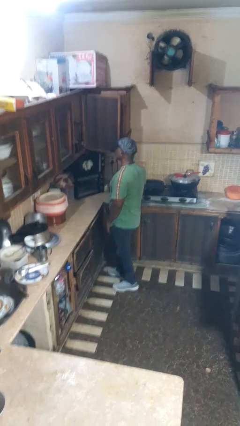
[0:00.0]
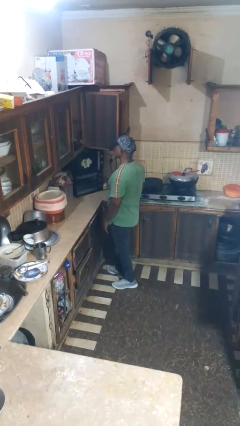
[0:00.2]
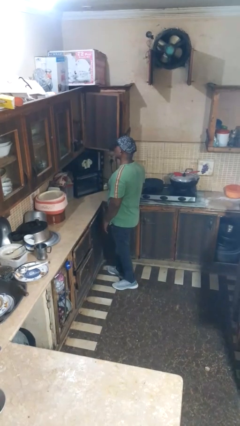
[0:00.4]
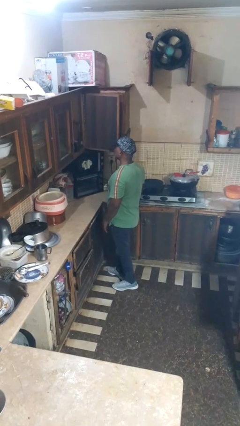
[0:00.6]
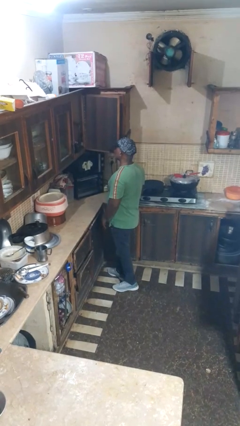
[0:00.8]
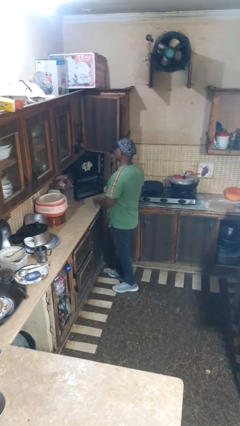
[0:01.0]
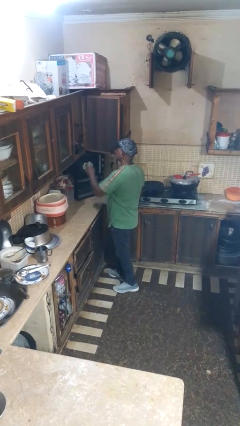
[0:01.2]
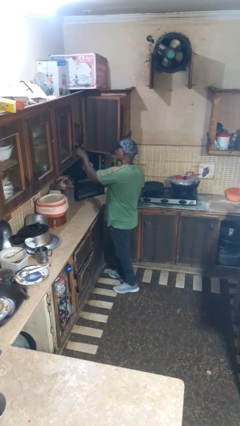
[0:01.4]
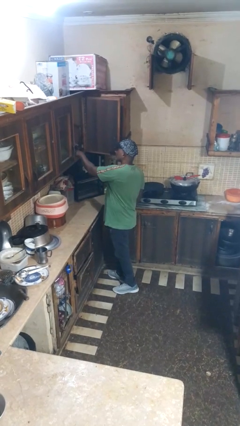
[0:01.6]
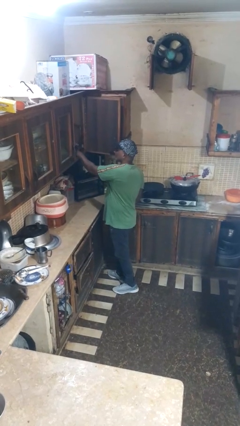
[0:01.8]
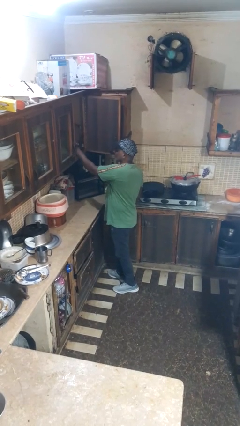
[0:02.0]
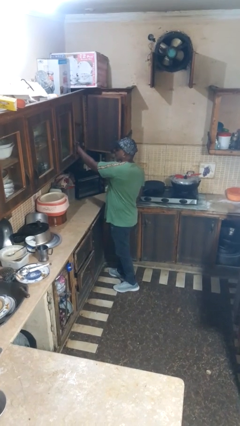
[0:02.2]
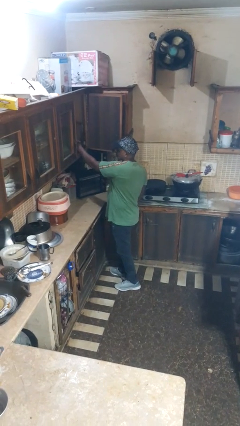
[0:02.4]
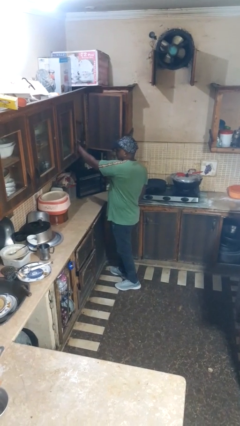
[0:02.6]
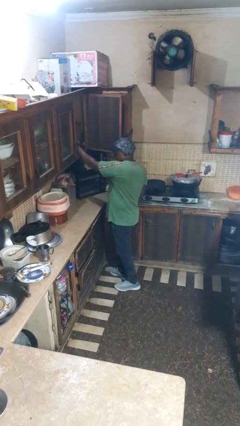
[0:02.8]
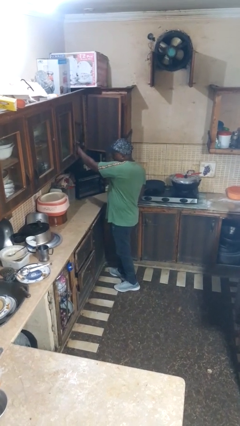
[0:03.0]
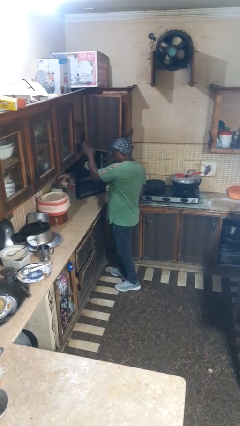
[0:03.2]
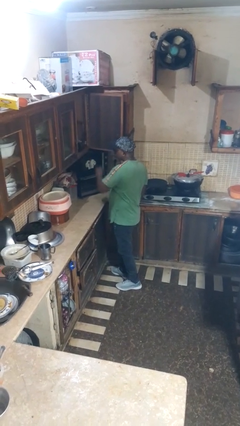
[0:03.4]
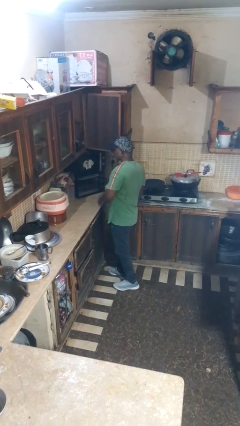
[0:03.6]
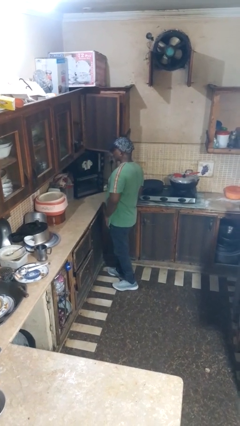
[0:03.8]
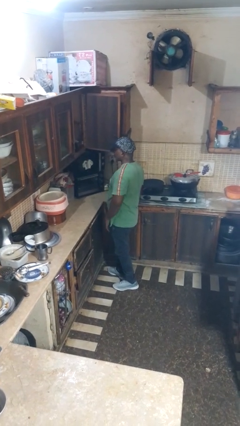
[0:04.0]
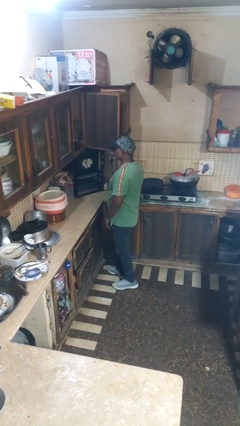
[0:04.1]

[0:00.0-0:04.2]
person searches in cabinet

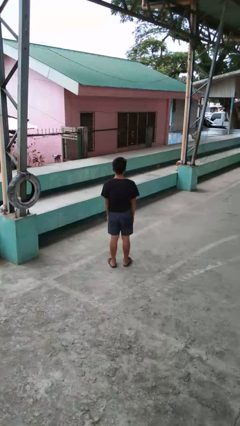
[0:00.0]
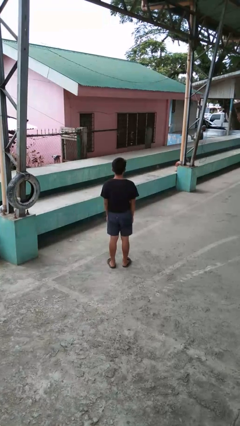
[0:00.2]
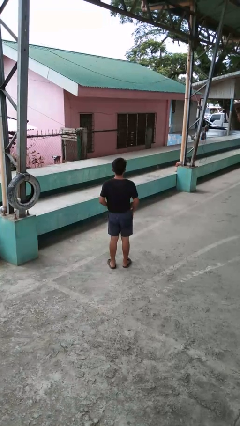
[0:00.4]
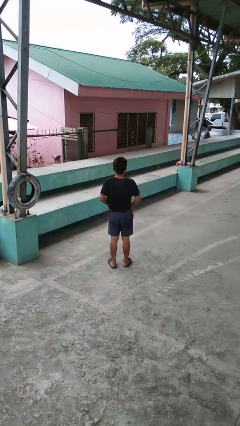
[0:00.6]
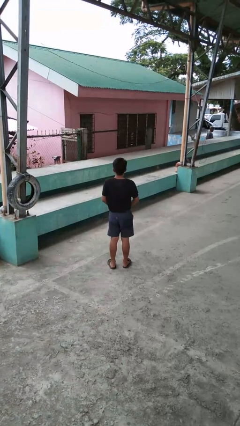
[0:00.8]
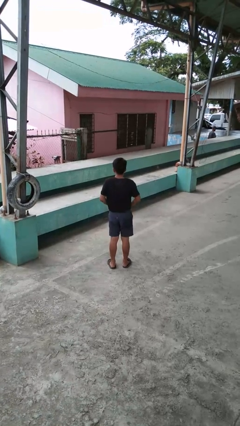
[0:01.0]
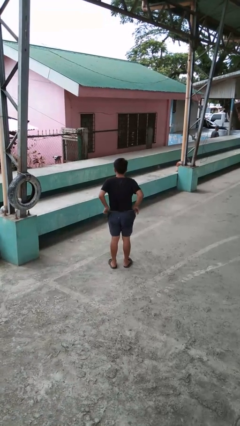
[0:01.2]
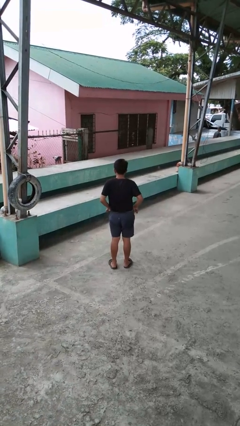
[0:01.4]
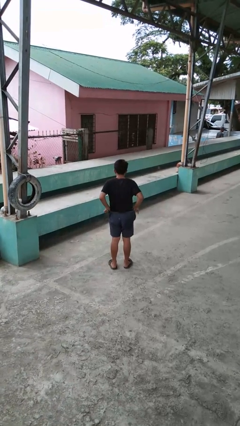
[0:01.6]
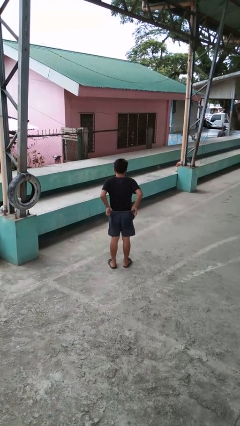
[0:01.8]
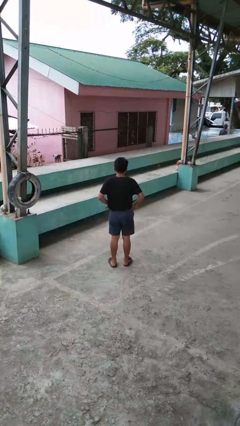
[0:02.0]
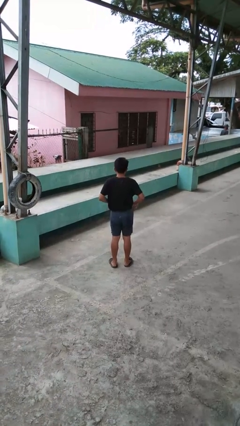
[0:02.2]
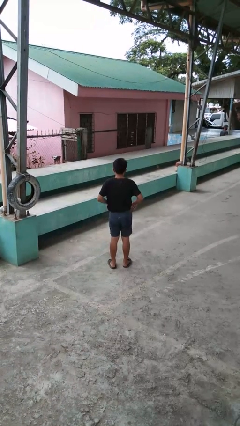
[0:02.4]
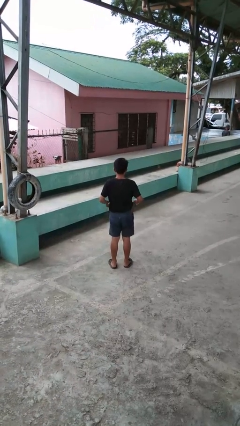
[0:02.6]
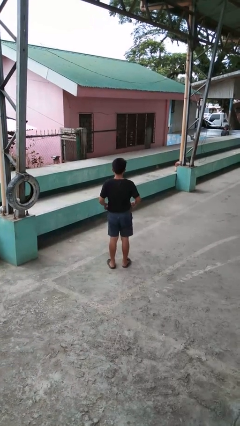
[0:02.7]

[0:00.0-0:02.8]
person hikes up pants

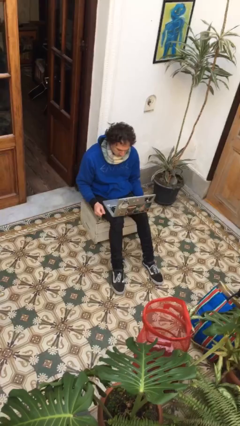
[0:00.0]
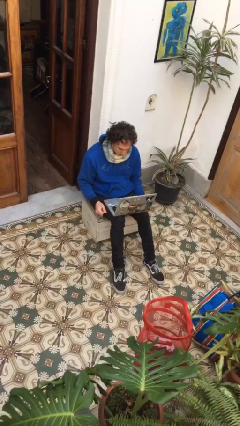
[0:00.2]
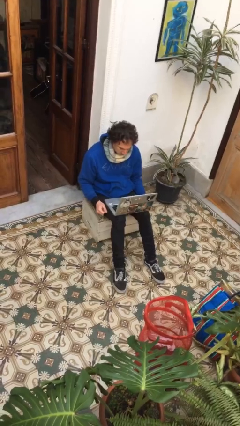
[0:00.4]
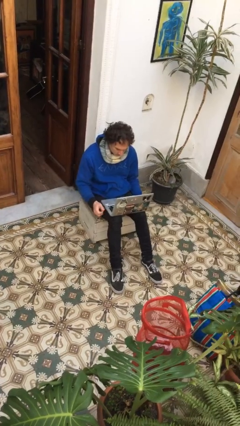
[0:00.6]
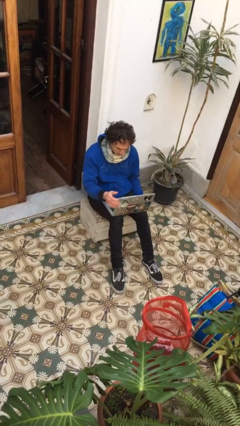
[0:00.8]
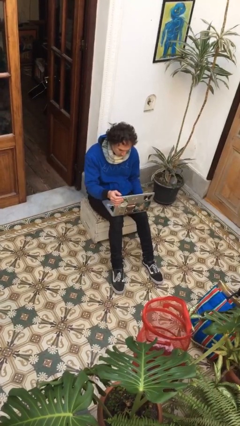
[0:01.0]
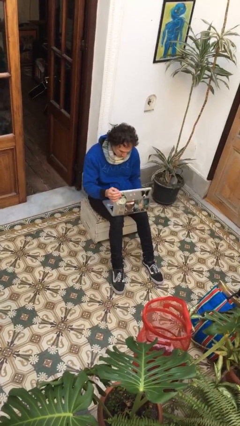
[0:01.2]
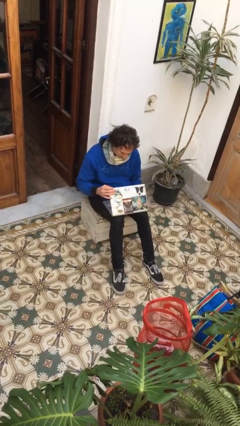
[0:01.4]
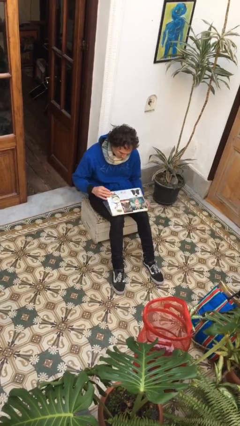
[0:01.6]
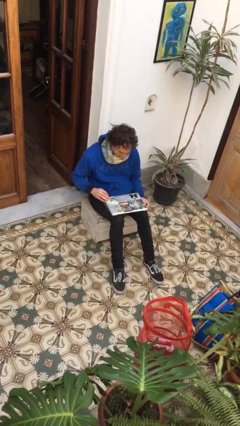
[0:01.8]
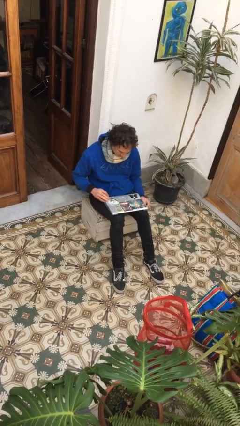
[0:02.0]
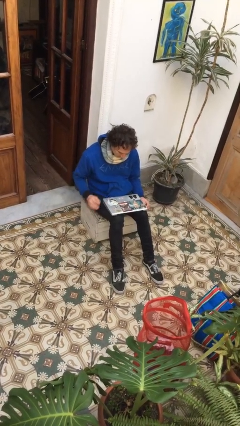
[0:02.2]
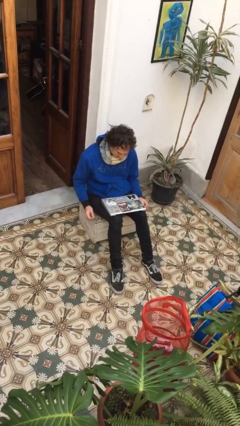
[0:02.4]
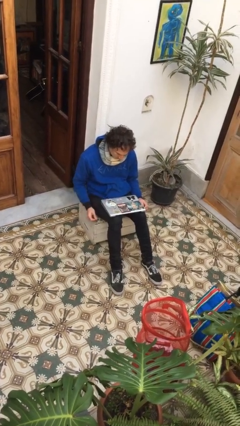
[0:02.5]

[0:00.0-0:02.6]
person closes laptop

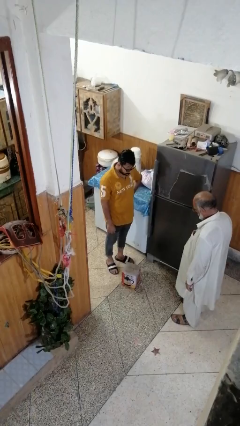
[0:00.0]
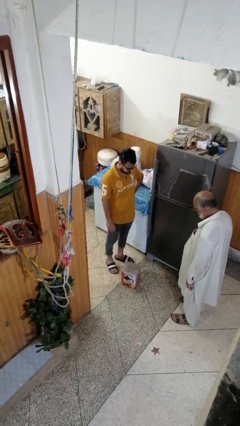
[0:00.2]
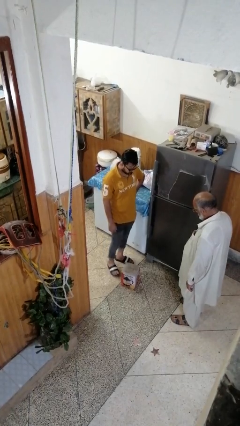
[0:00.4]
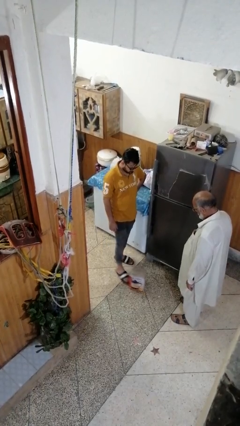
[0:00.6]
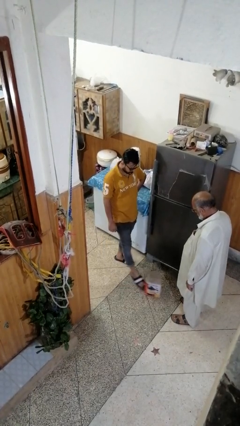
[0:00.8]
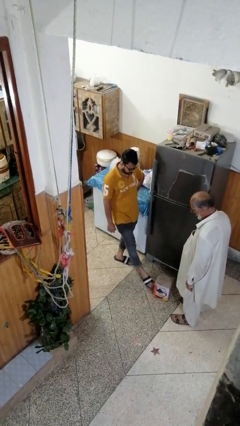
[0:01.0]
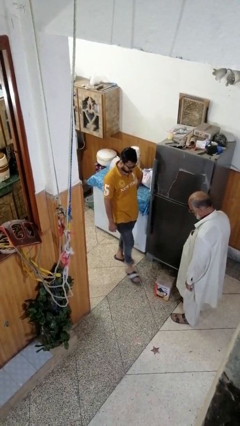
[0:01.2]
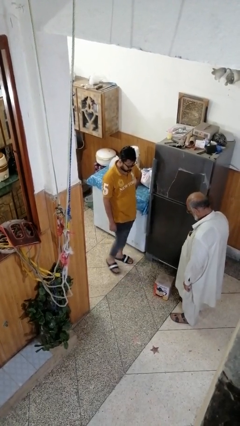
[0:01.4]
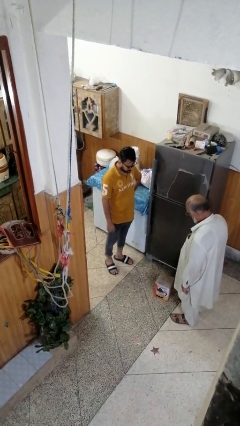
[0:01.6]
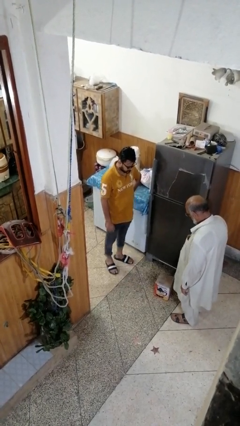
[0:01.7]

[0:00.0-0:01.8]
person kicks object to person

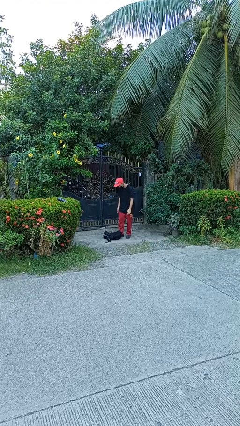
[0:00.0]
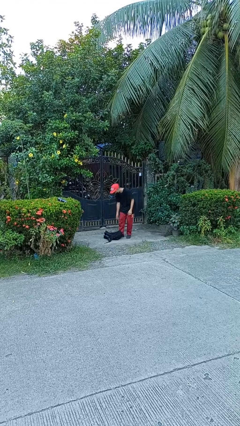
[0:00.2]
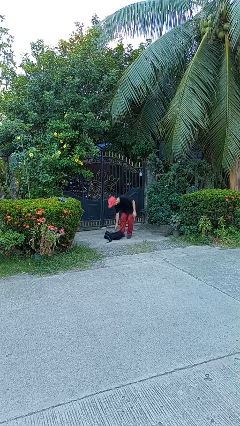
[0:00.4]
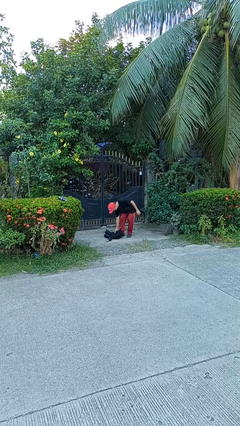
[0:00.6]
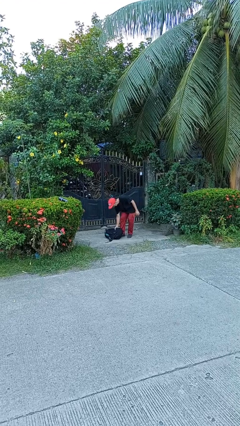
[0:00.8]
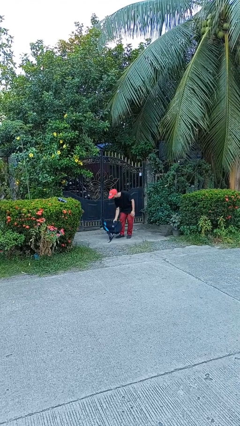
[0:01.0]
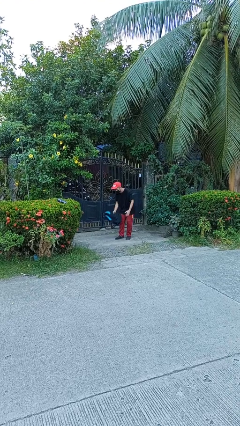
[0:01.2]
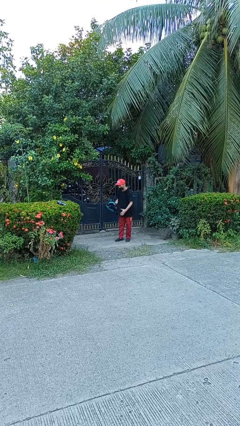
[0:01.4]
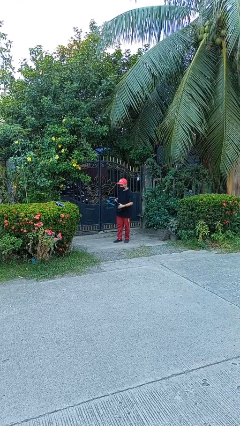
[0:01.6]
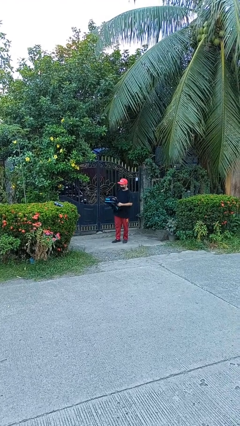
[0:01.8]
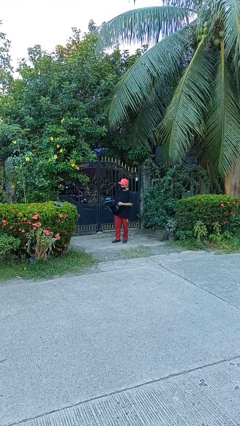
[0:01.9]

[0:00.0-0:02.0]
person picks up object from floor

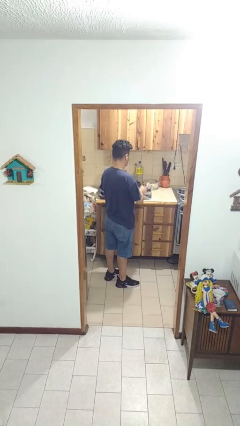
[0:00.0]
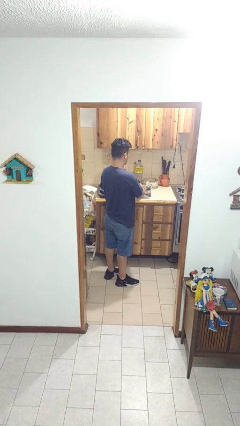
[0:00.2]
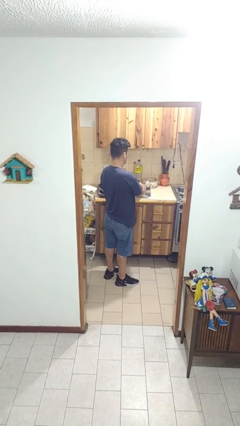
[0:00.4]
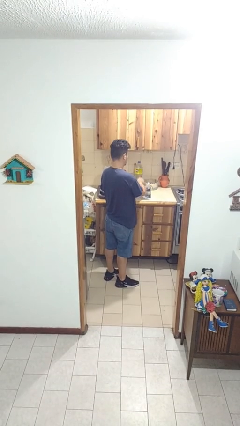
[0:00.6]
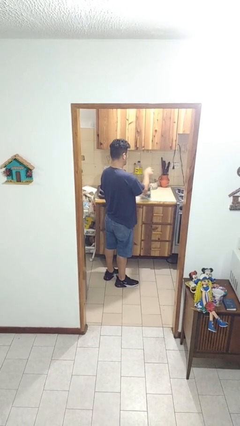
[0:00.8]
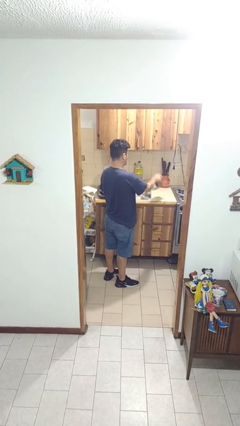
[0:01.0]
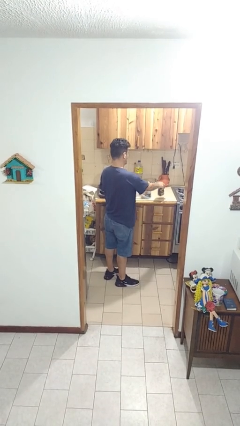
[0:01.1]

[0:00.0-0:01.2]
person takes object from bag

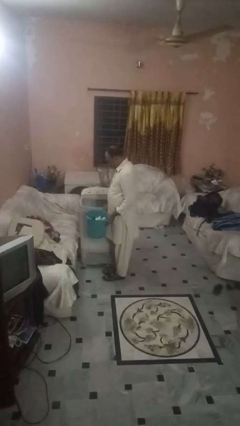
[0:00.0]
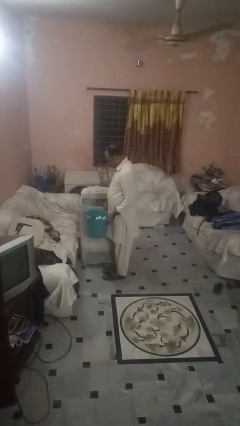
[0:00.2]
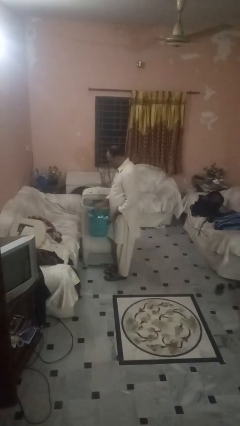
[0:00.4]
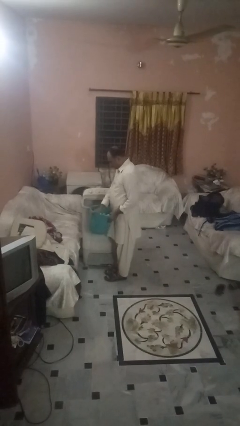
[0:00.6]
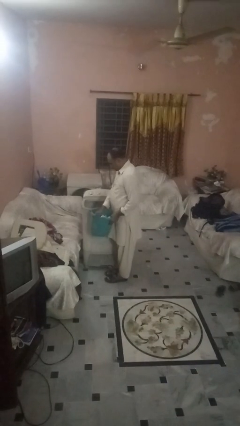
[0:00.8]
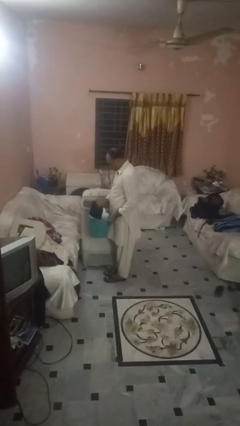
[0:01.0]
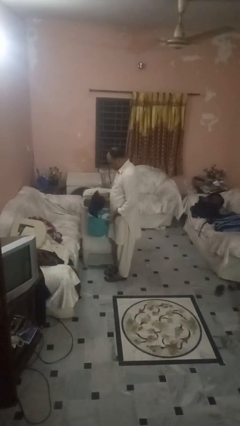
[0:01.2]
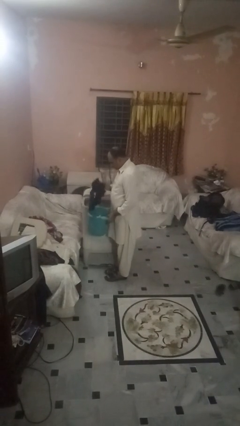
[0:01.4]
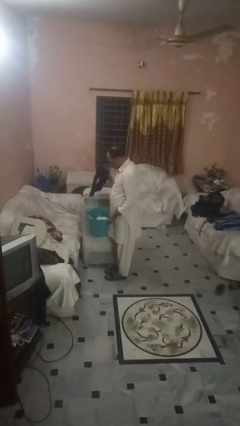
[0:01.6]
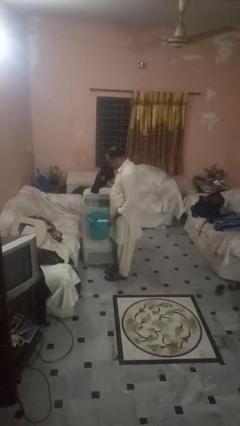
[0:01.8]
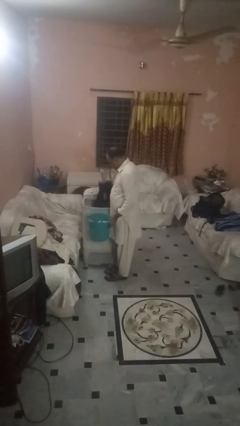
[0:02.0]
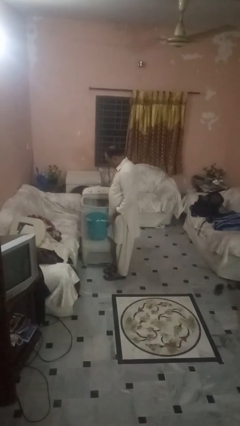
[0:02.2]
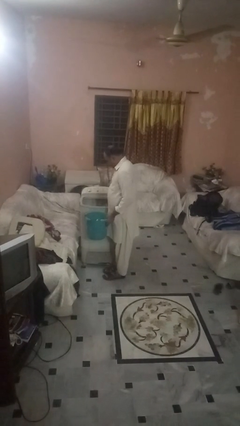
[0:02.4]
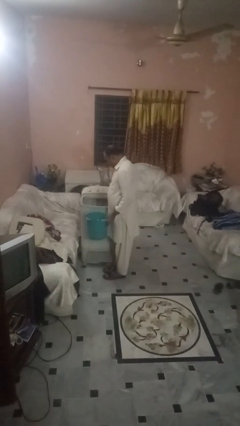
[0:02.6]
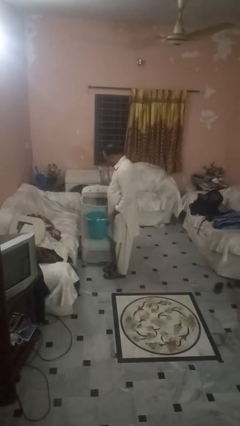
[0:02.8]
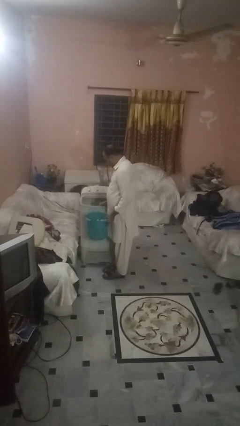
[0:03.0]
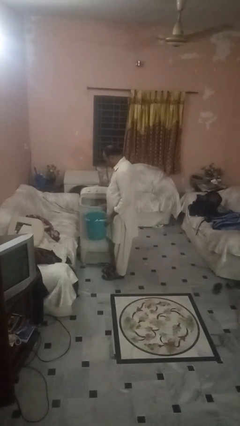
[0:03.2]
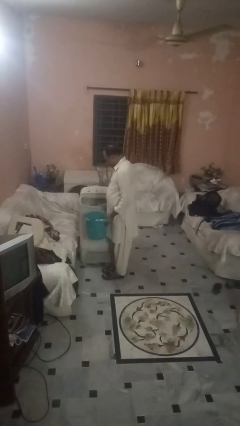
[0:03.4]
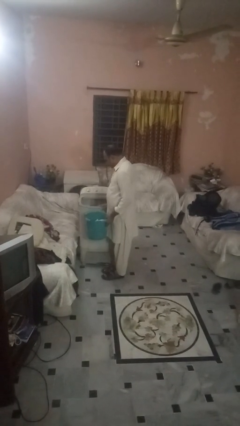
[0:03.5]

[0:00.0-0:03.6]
person loads clotheswasher
